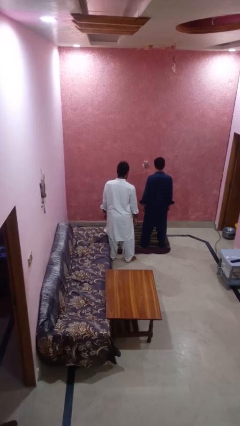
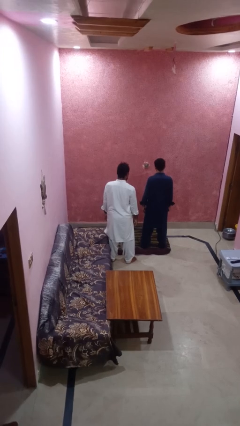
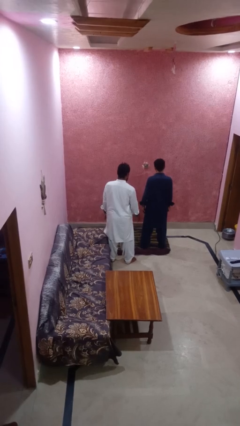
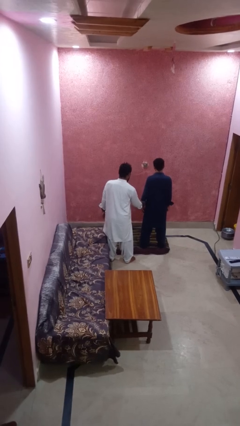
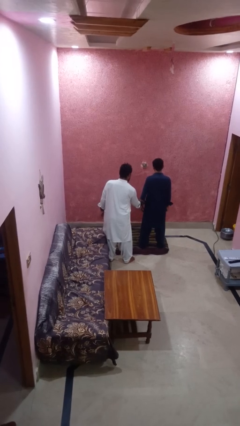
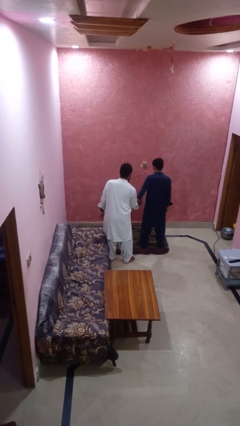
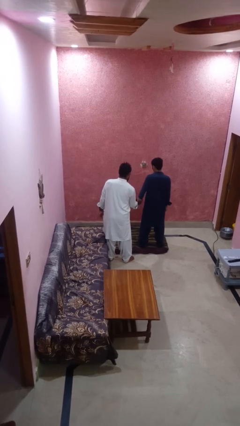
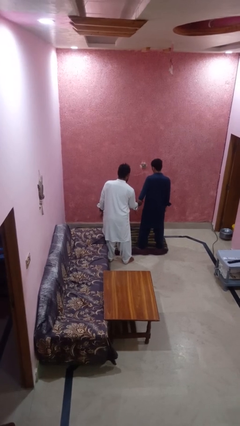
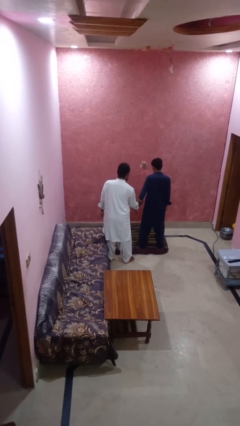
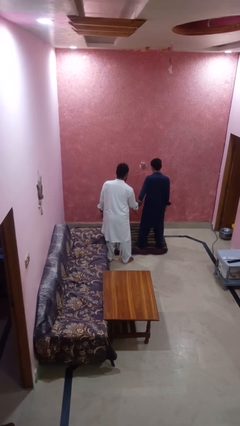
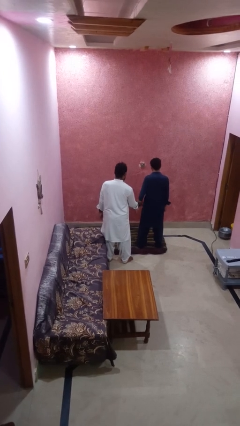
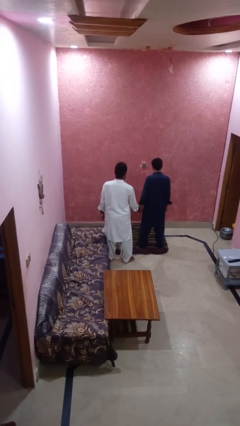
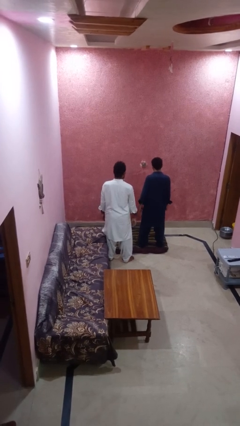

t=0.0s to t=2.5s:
person grabs person by bicep

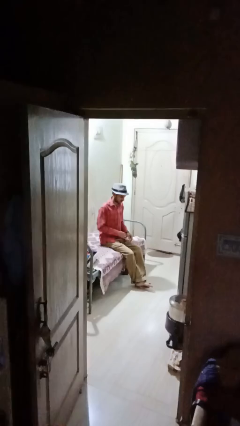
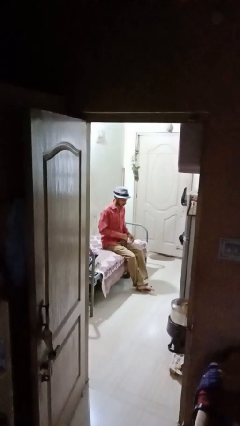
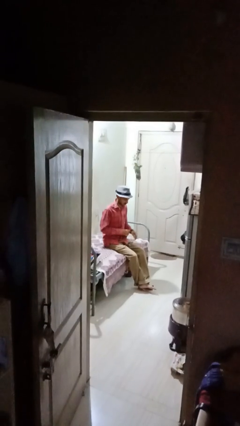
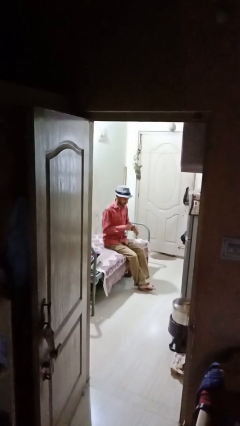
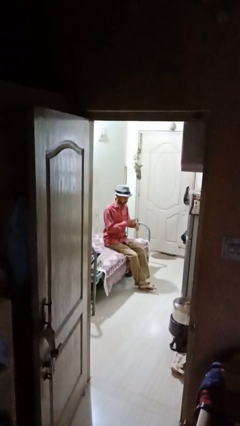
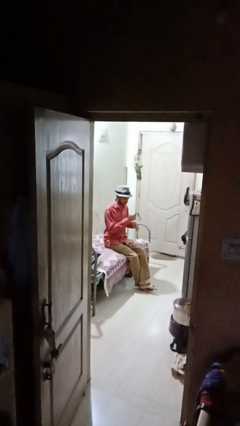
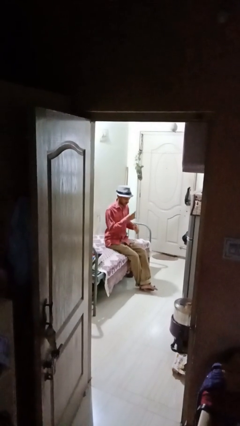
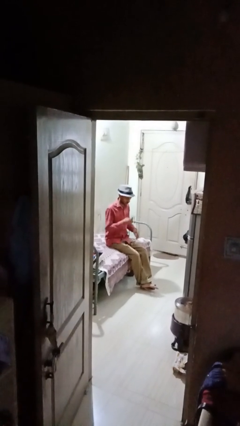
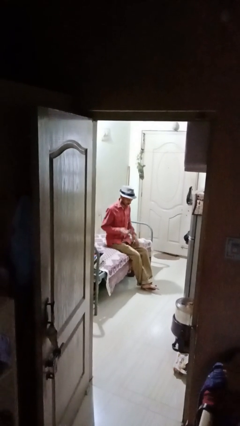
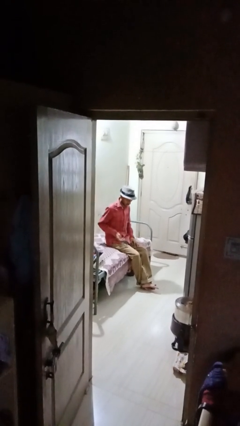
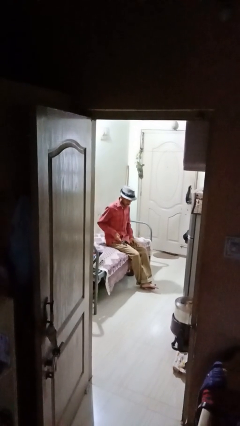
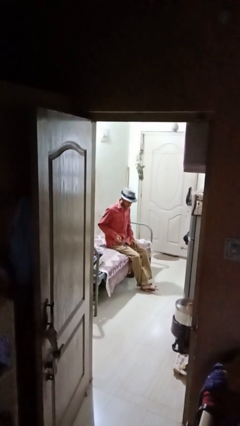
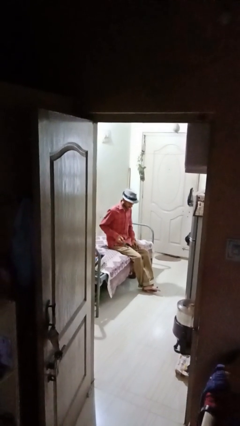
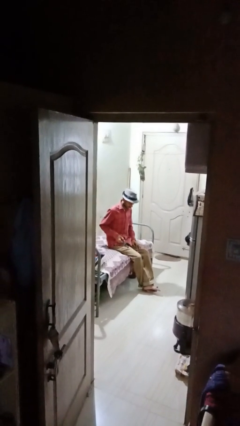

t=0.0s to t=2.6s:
person takes off wristwatch

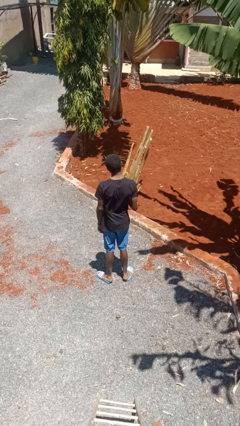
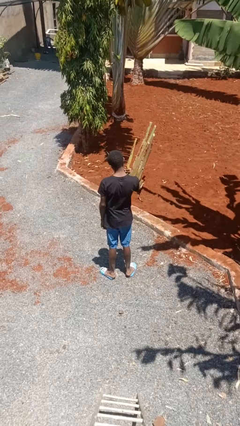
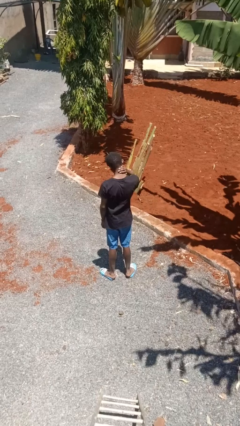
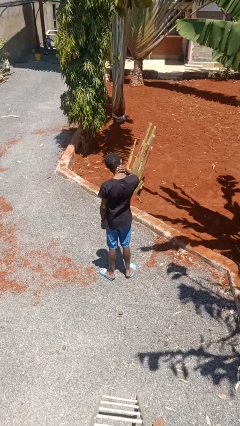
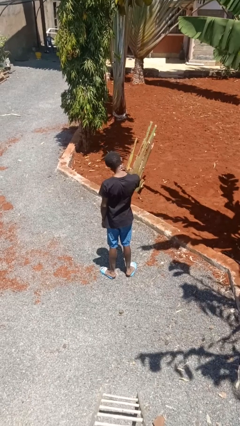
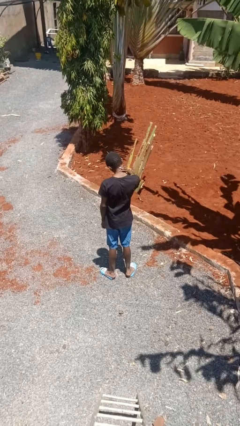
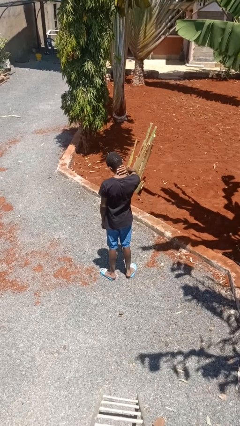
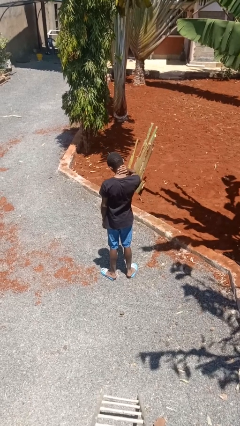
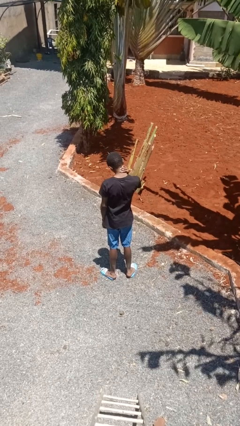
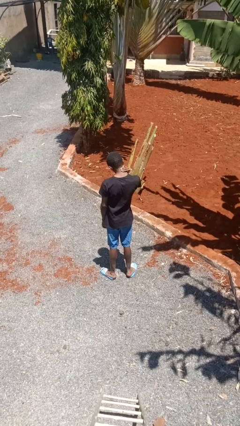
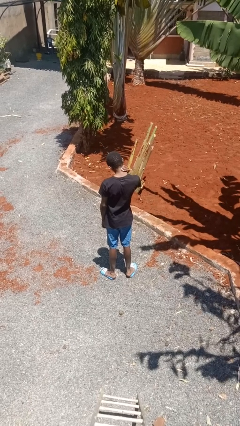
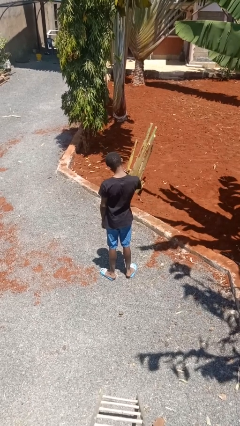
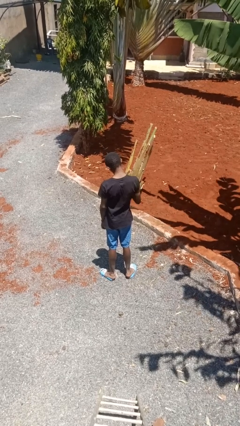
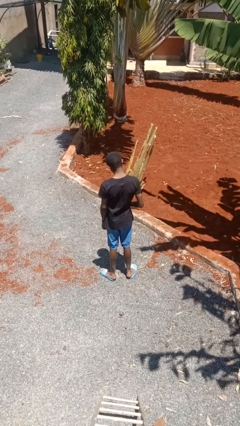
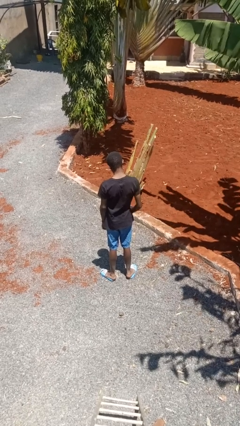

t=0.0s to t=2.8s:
person rubs neck

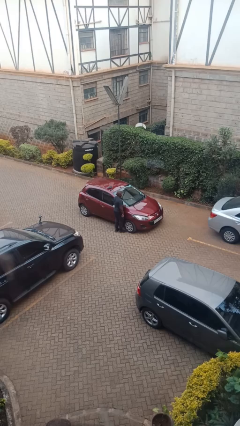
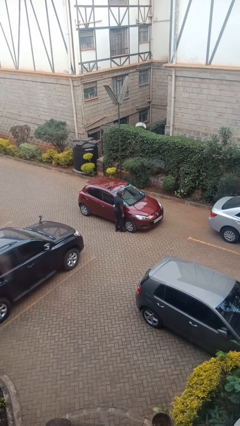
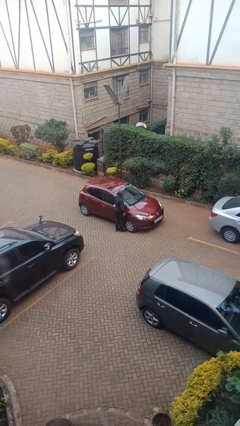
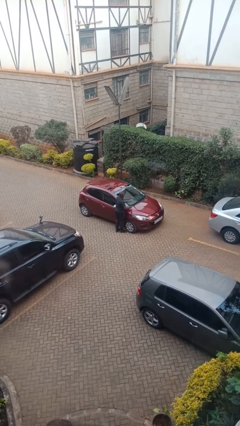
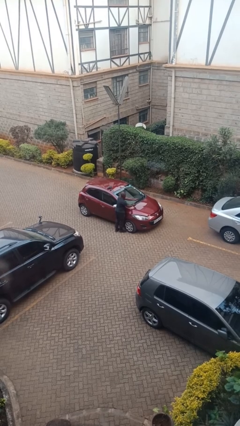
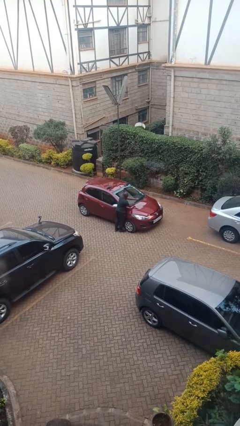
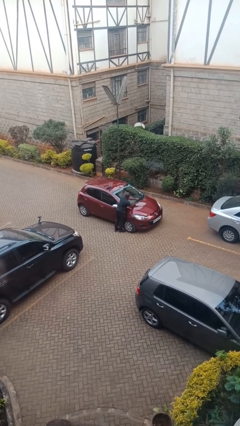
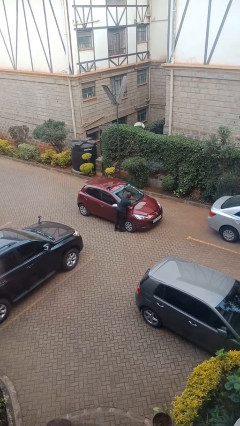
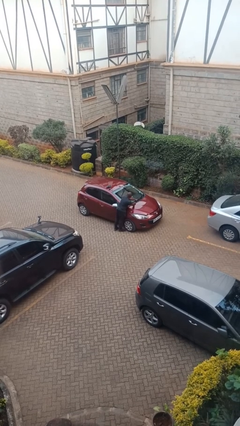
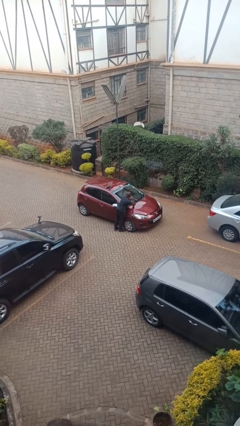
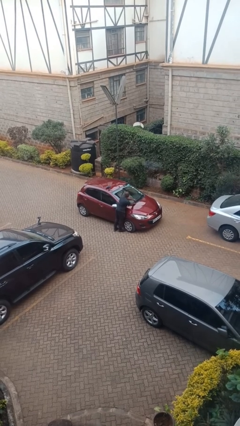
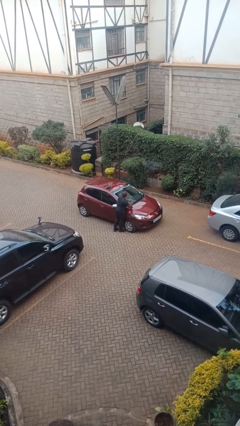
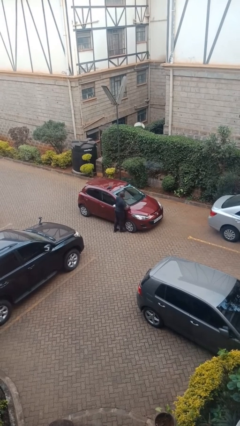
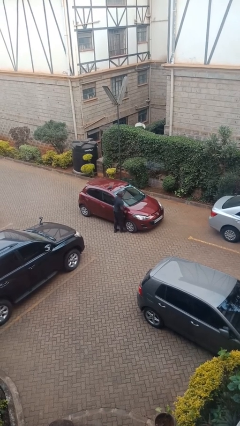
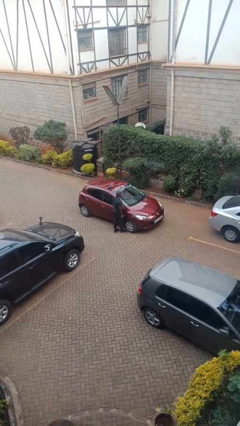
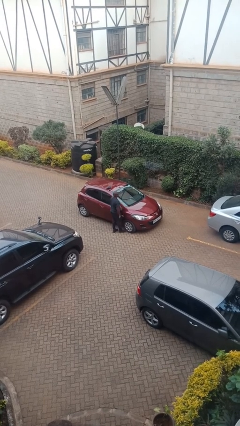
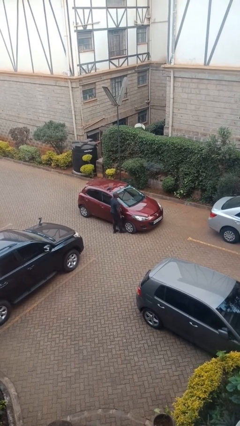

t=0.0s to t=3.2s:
person flips down car wipers

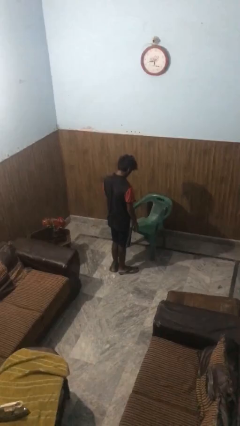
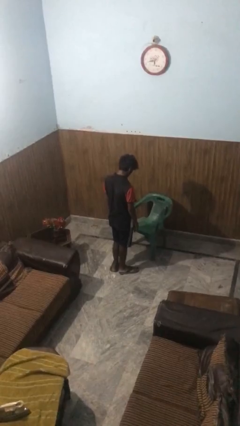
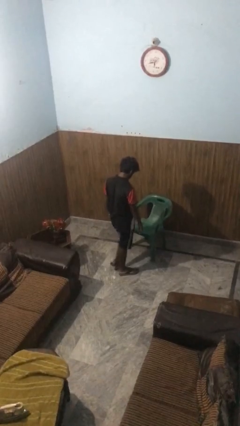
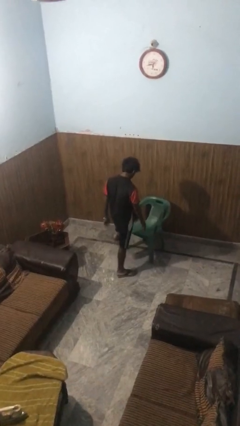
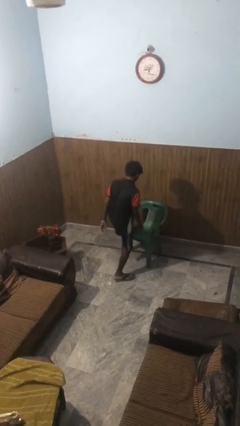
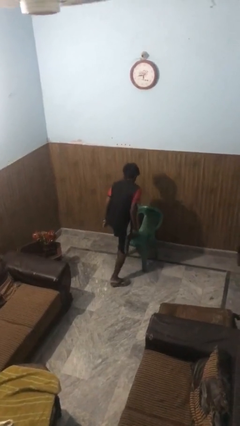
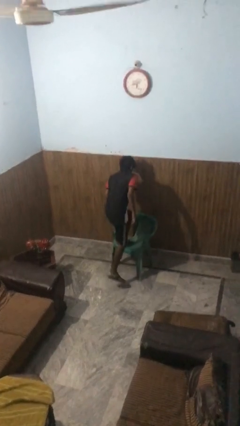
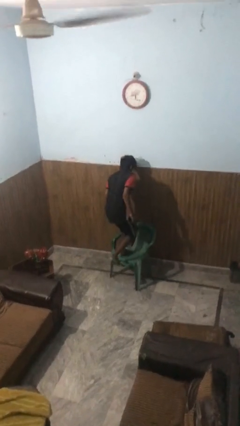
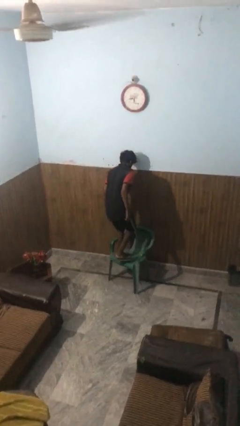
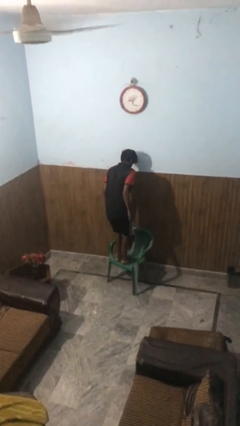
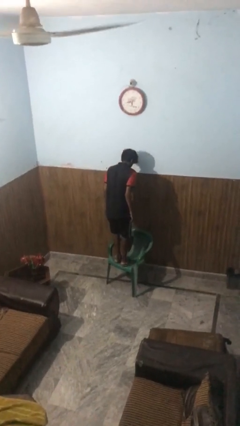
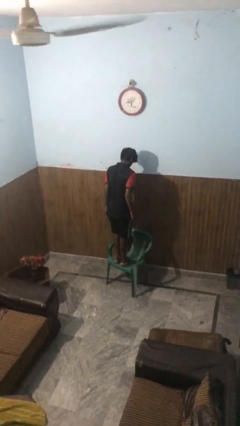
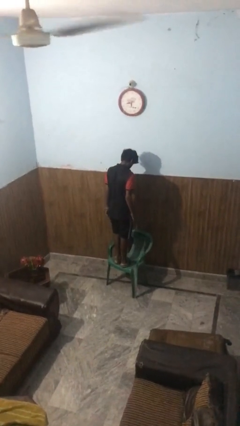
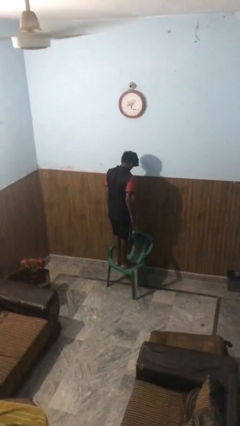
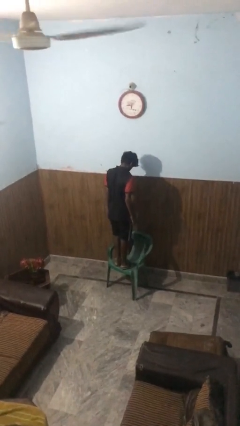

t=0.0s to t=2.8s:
person climbs on chair

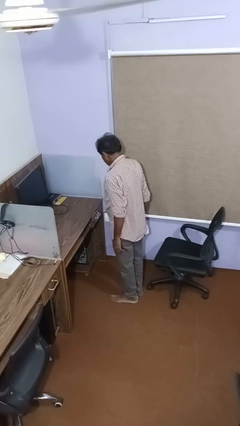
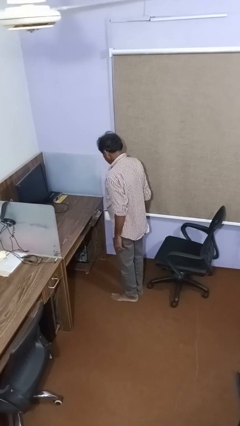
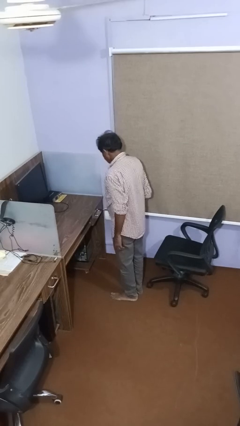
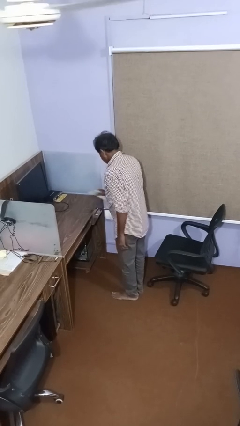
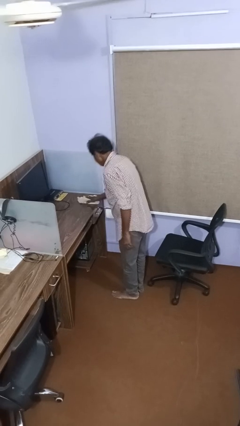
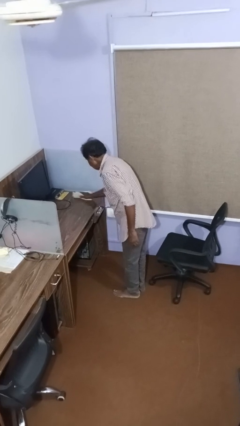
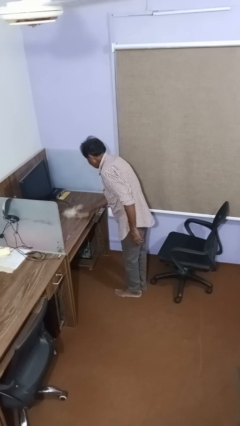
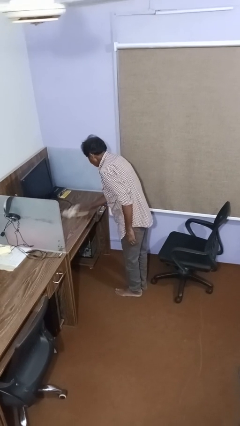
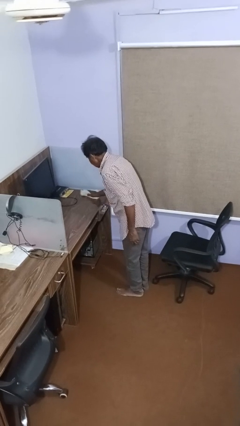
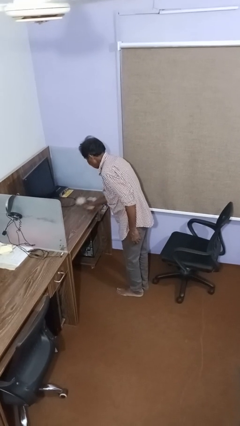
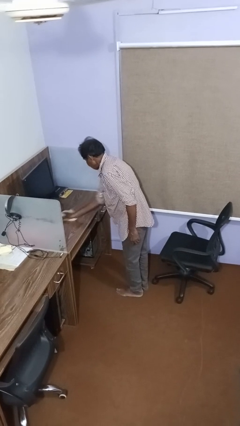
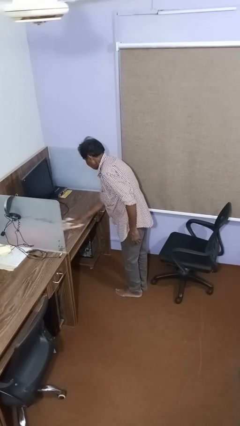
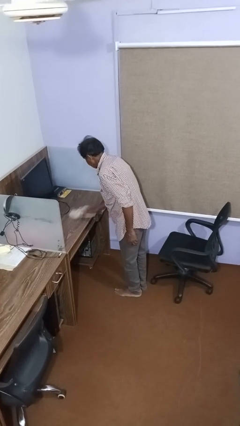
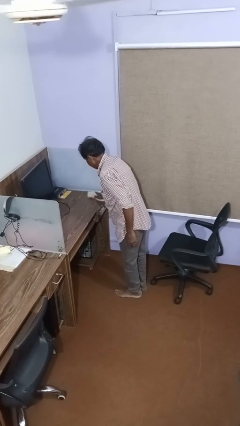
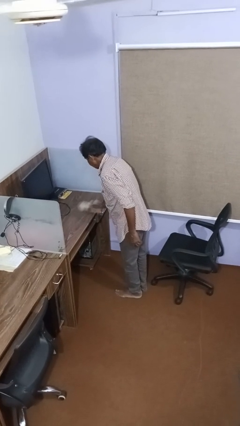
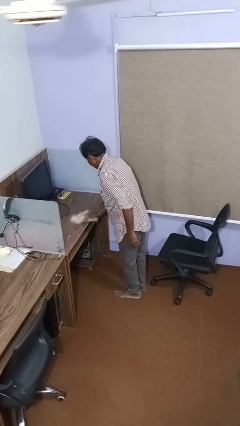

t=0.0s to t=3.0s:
person dusts furniture

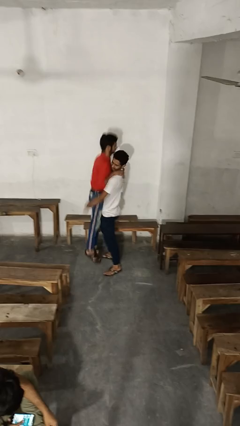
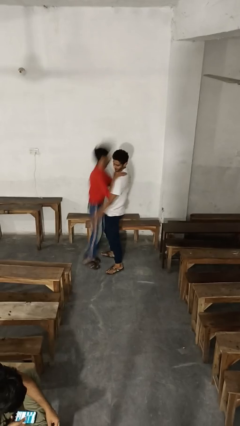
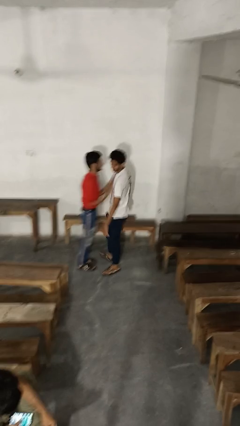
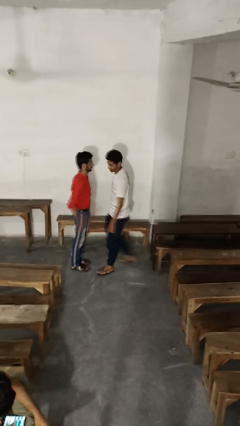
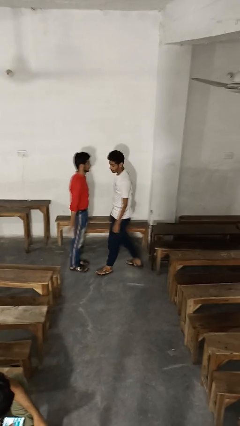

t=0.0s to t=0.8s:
person puts down person
